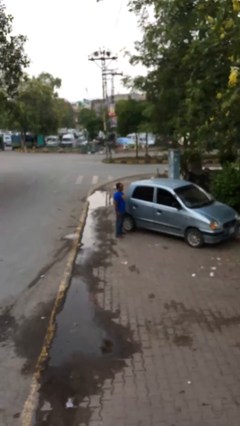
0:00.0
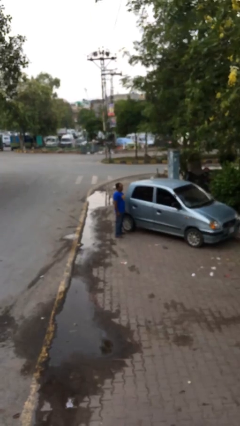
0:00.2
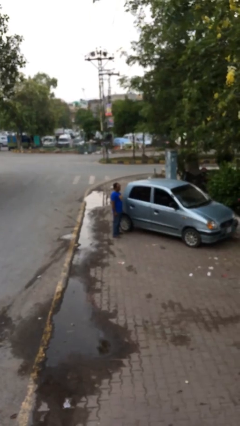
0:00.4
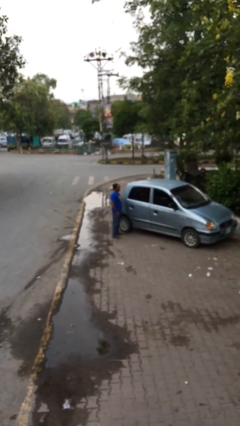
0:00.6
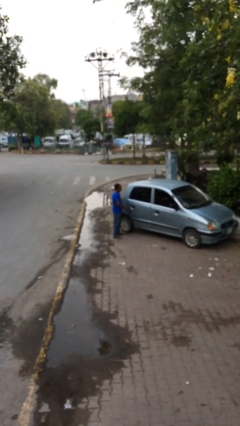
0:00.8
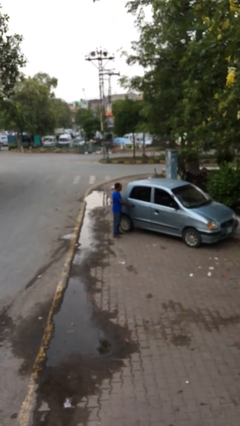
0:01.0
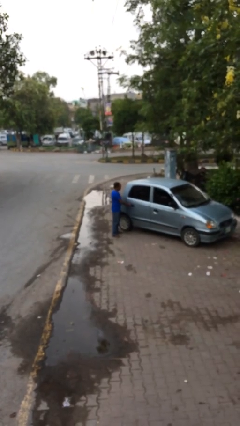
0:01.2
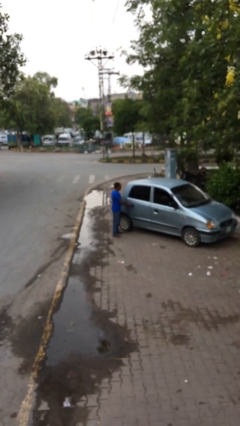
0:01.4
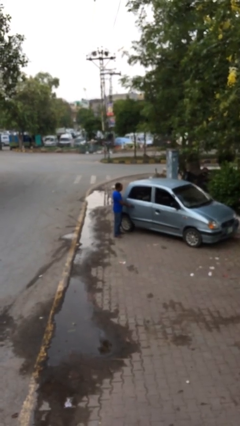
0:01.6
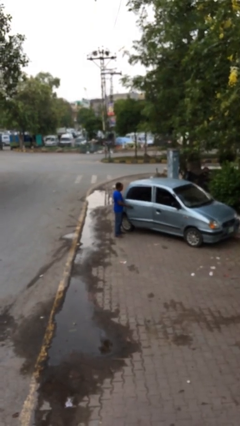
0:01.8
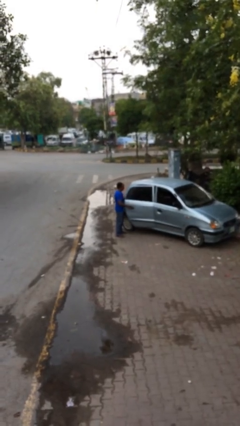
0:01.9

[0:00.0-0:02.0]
person opens car door

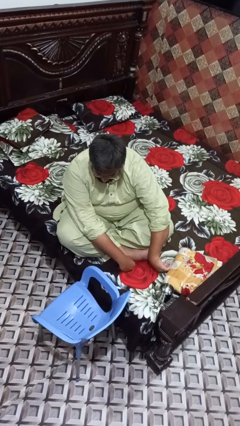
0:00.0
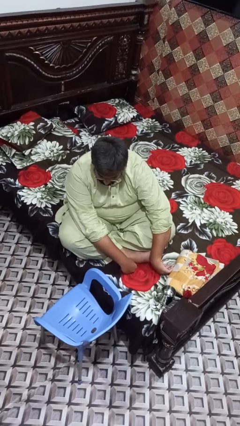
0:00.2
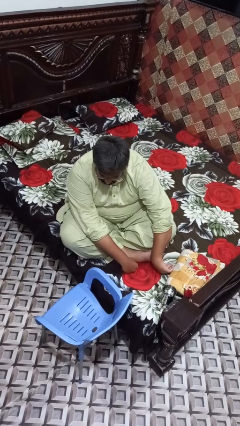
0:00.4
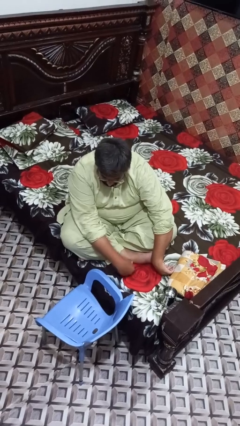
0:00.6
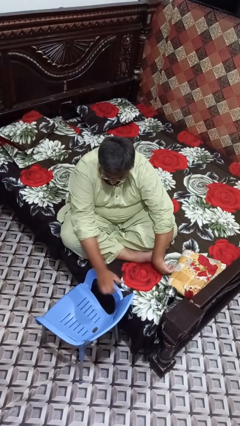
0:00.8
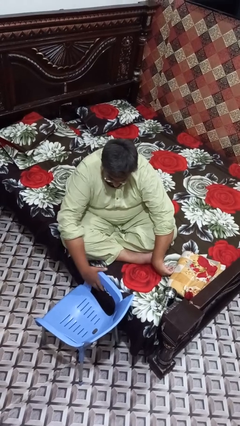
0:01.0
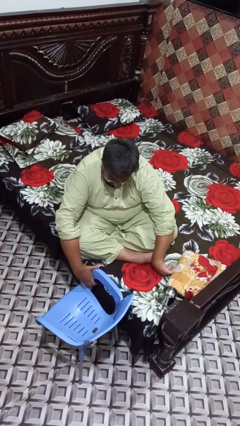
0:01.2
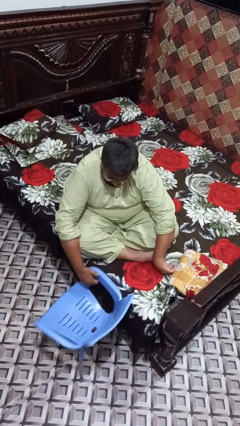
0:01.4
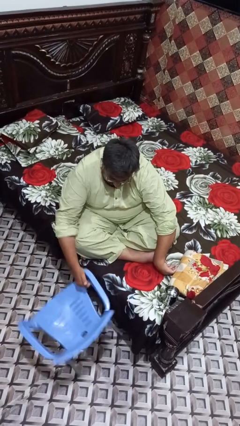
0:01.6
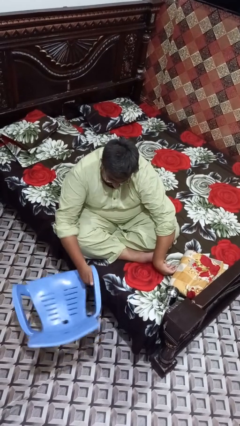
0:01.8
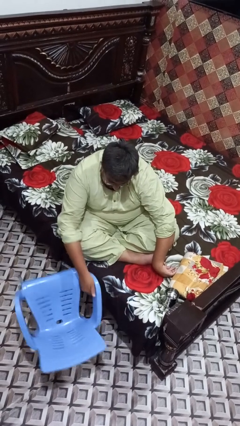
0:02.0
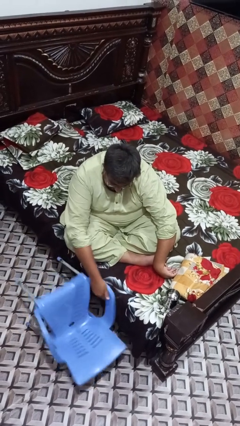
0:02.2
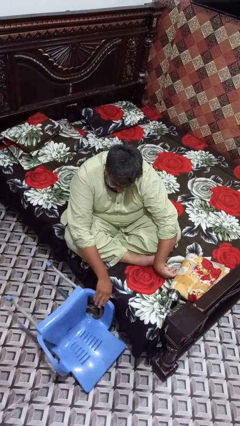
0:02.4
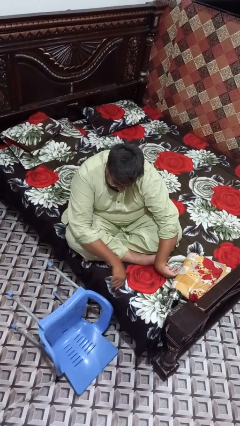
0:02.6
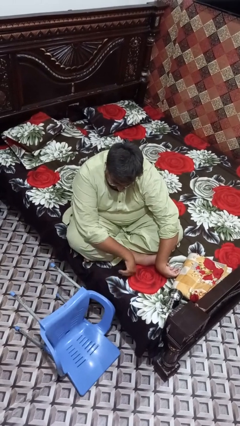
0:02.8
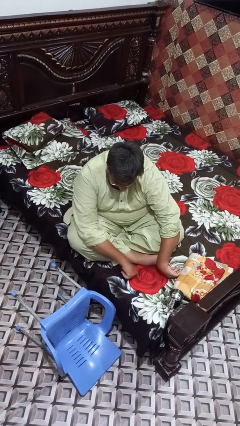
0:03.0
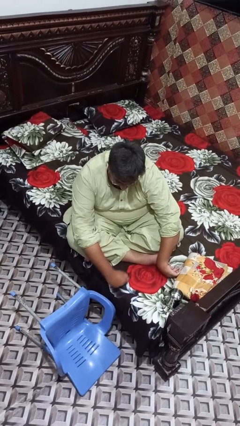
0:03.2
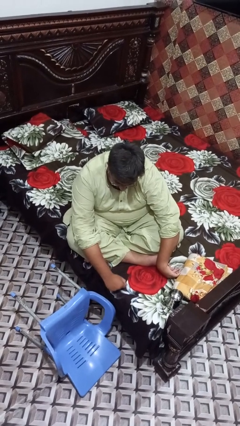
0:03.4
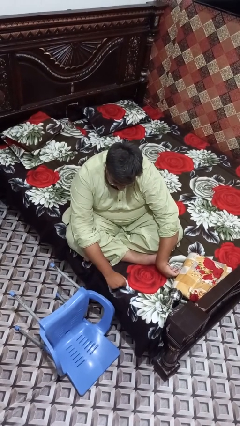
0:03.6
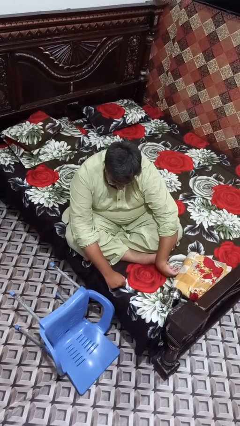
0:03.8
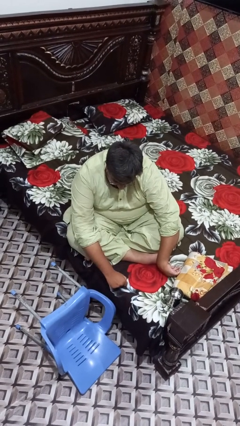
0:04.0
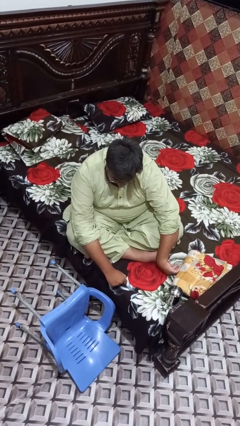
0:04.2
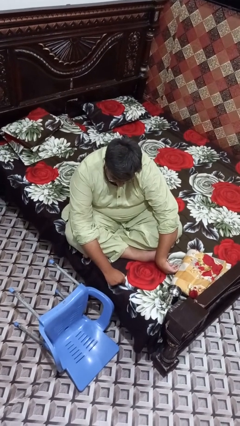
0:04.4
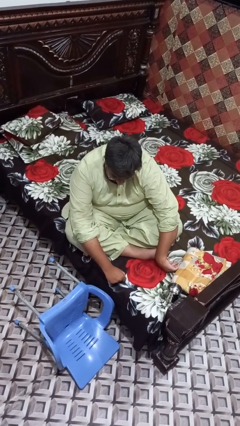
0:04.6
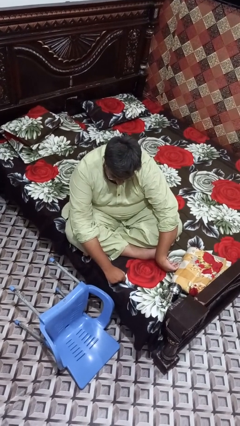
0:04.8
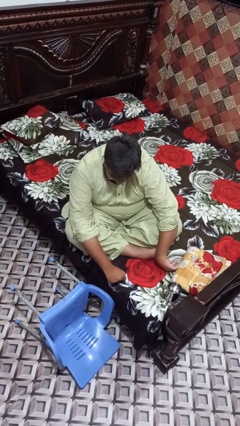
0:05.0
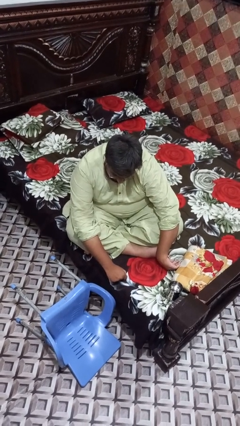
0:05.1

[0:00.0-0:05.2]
person knocks over furniture

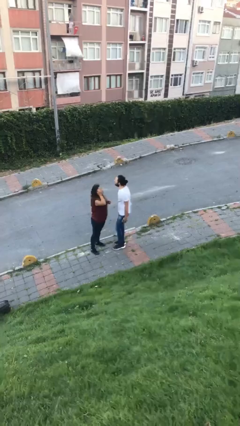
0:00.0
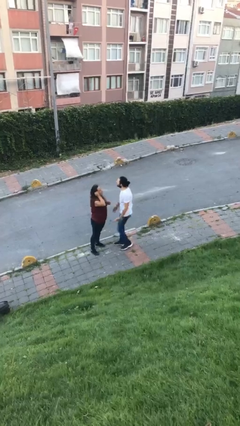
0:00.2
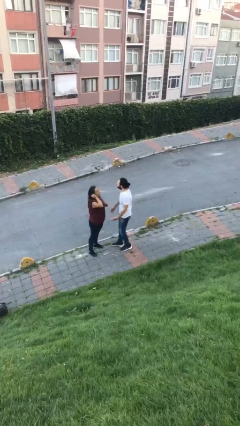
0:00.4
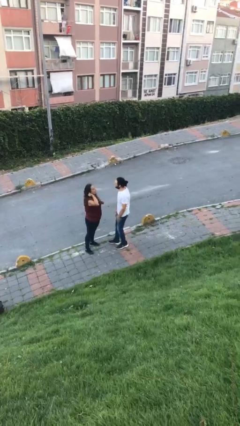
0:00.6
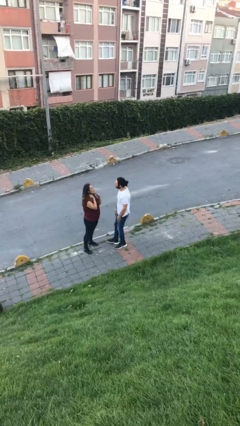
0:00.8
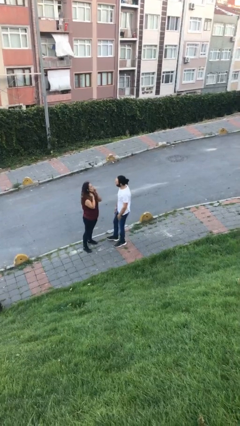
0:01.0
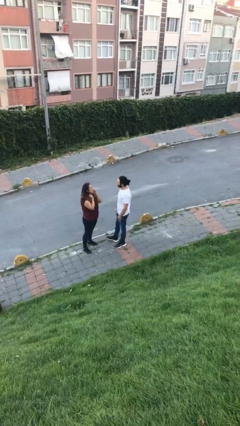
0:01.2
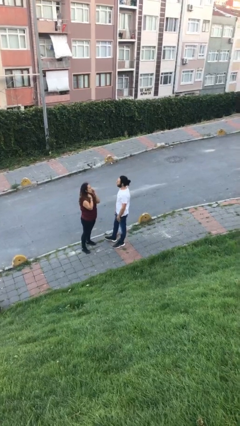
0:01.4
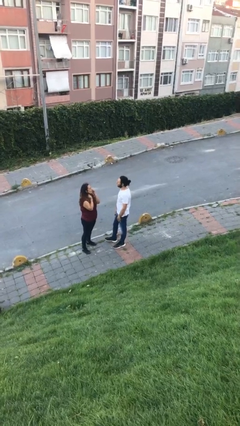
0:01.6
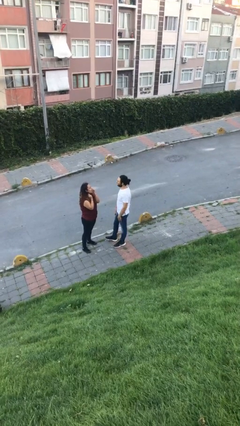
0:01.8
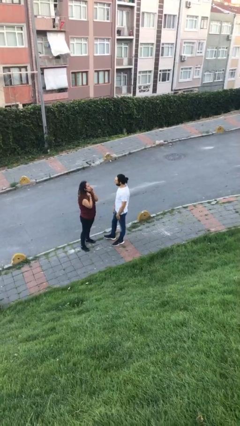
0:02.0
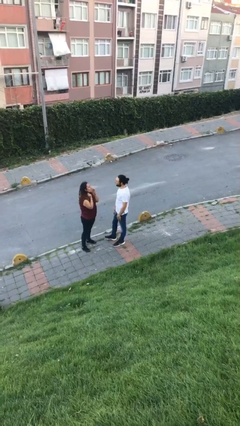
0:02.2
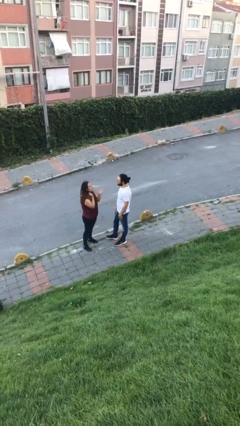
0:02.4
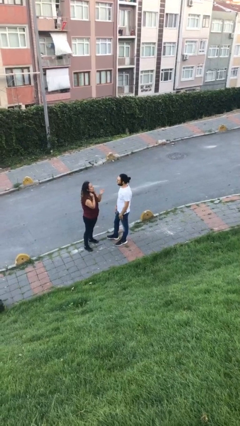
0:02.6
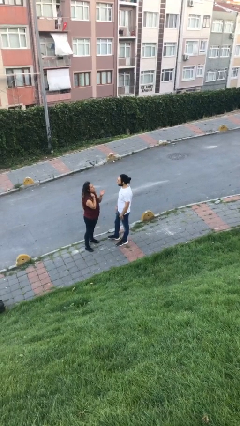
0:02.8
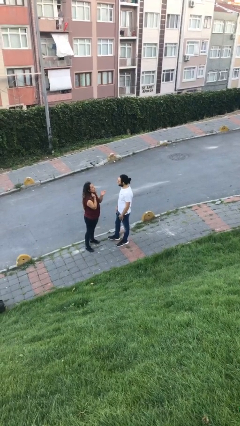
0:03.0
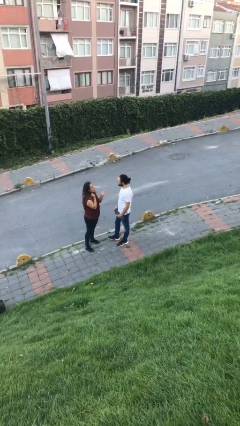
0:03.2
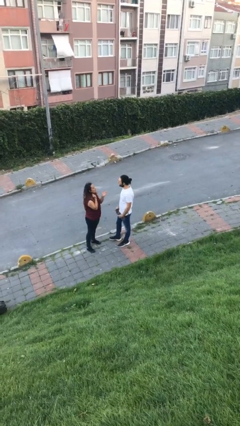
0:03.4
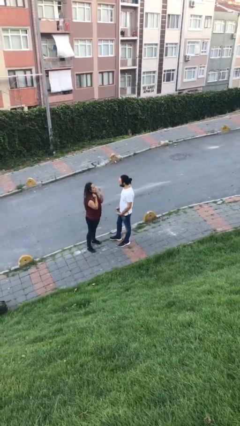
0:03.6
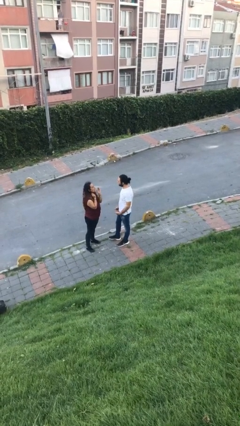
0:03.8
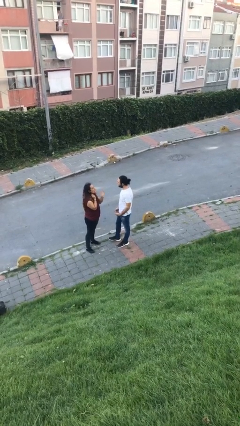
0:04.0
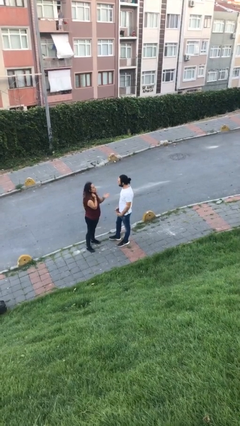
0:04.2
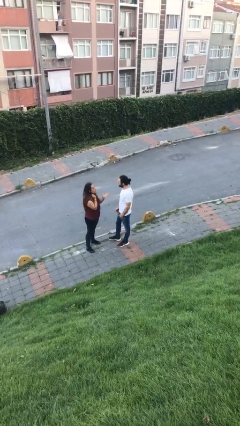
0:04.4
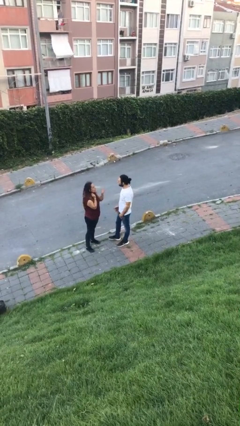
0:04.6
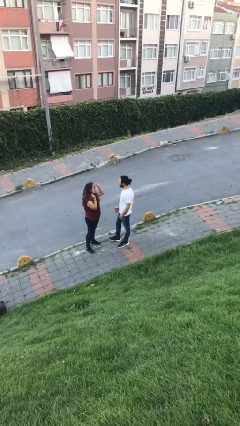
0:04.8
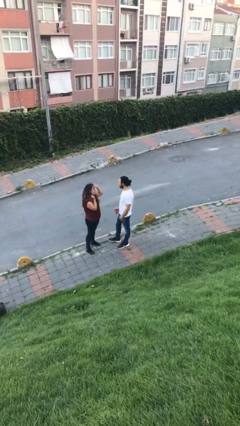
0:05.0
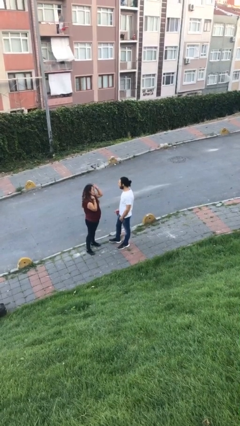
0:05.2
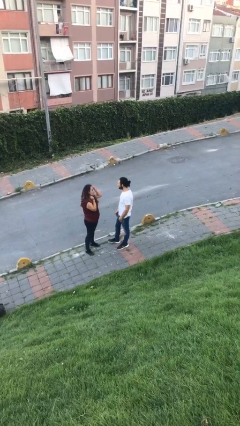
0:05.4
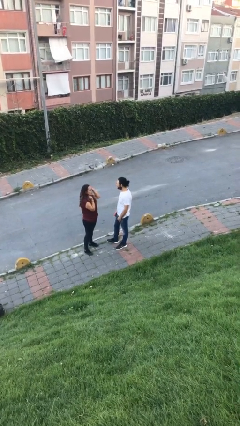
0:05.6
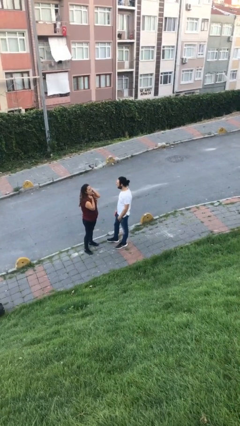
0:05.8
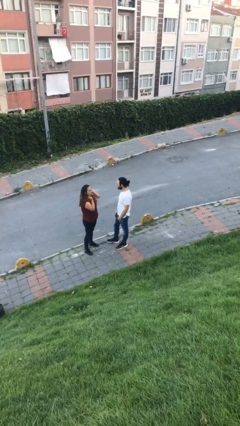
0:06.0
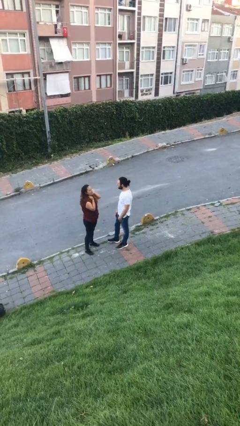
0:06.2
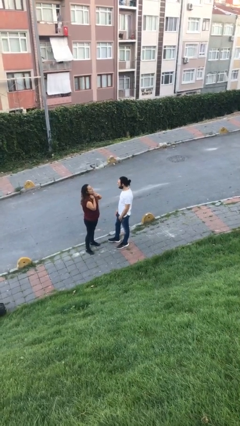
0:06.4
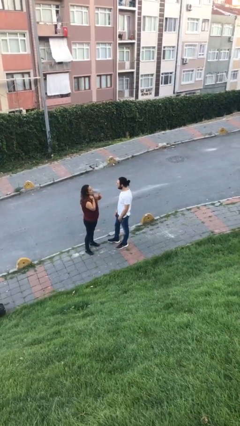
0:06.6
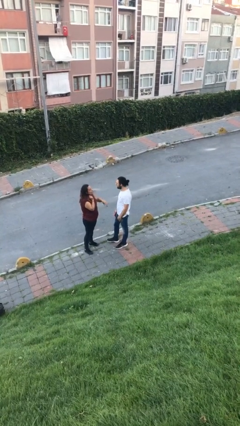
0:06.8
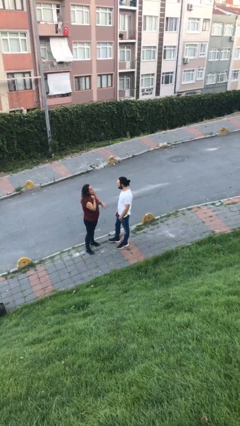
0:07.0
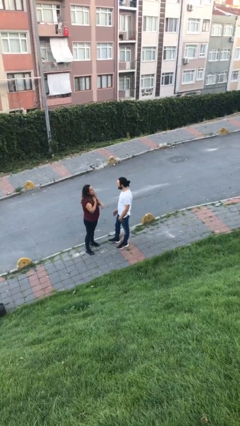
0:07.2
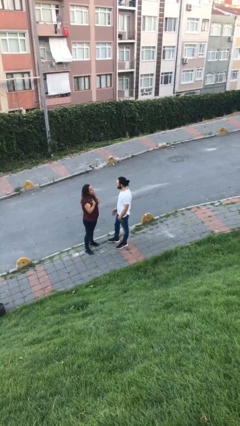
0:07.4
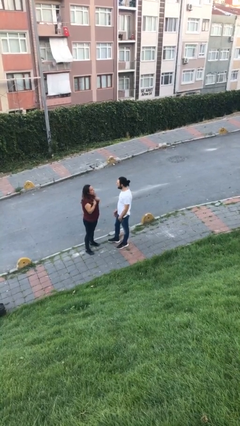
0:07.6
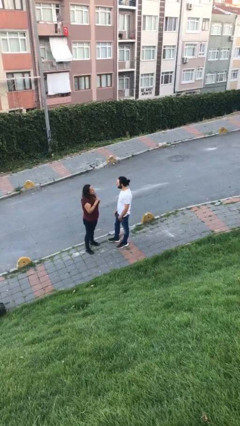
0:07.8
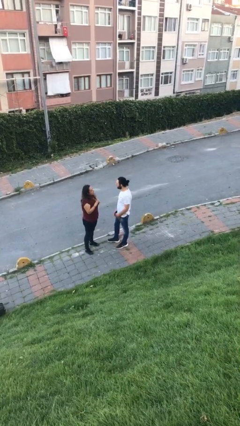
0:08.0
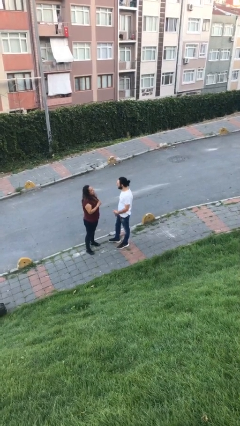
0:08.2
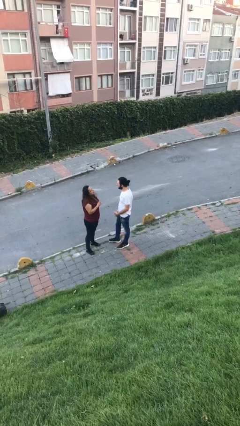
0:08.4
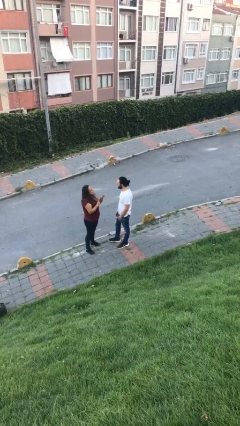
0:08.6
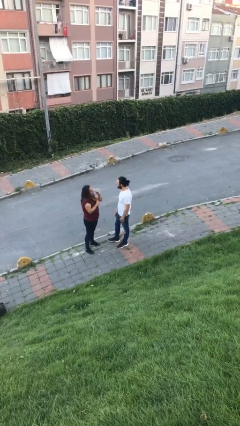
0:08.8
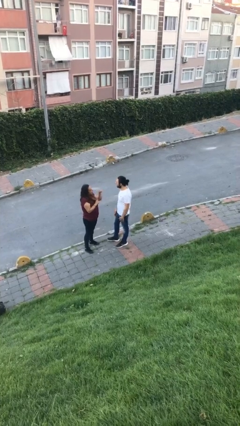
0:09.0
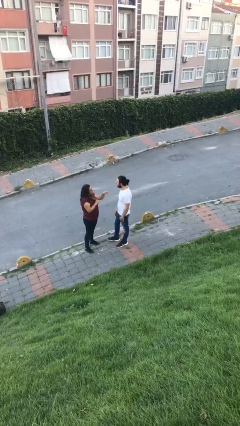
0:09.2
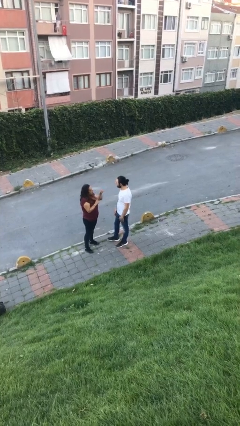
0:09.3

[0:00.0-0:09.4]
person talks to person

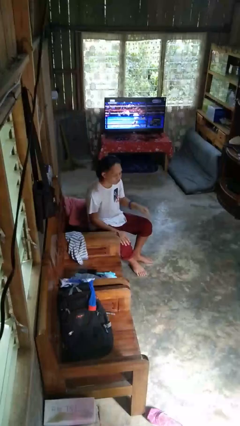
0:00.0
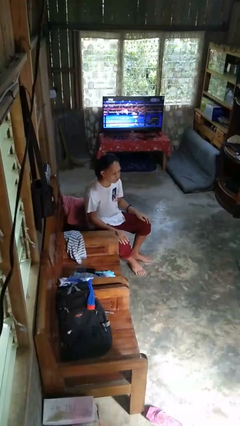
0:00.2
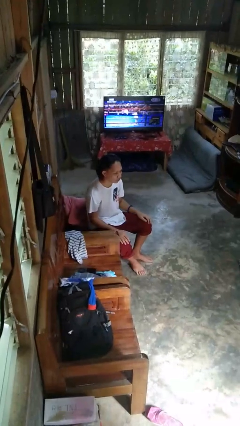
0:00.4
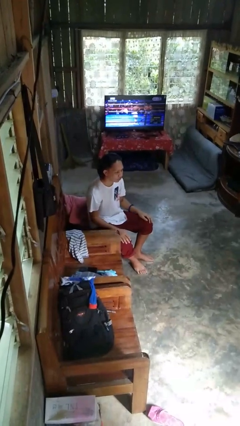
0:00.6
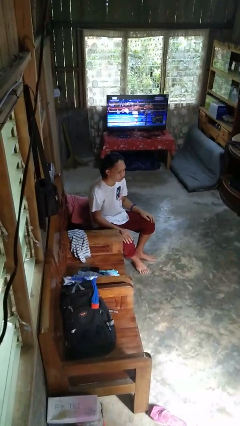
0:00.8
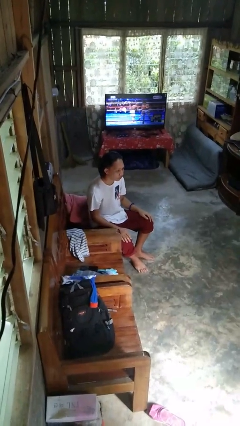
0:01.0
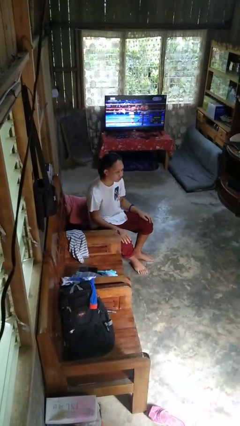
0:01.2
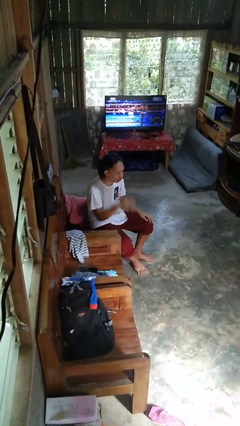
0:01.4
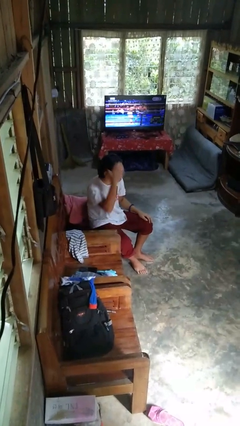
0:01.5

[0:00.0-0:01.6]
person strokes hair

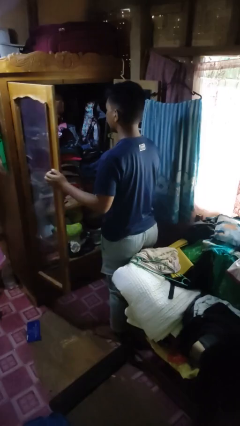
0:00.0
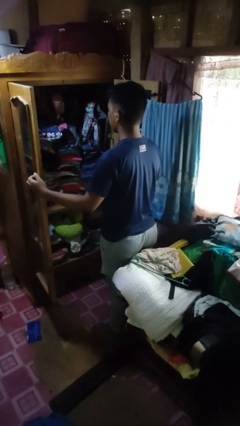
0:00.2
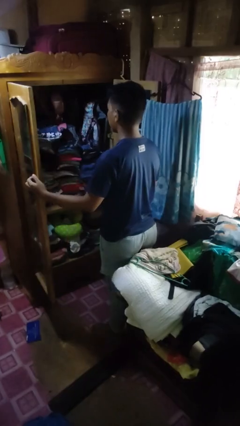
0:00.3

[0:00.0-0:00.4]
person opens closet door
